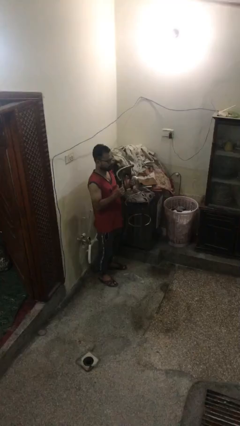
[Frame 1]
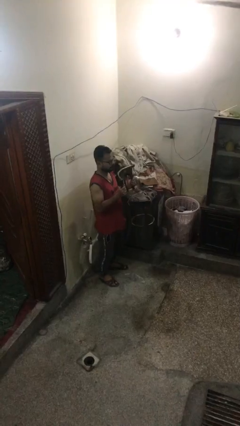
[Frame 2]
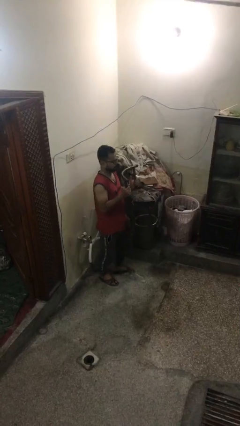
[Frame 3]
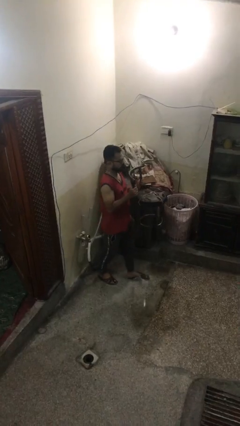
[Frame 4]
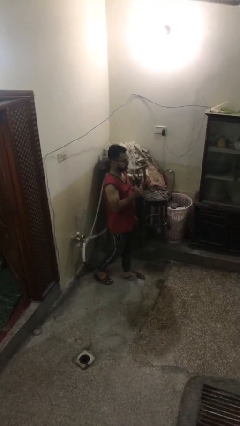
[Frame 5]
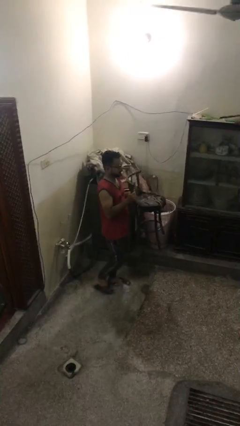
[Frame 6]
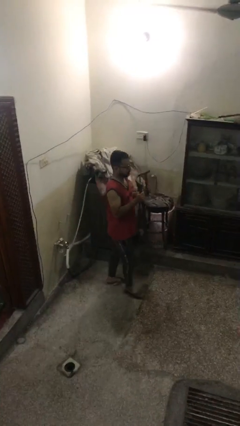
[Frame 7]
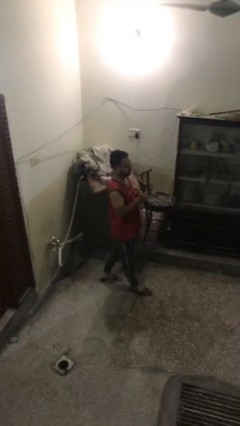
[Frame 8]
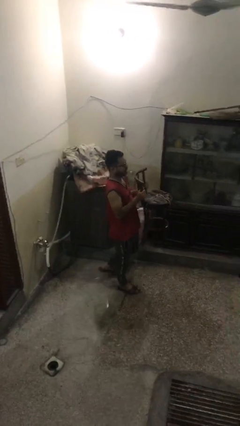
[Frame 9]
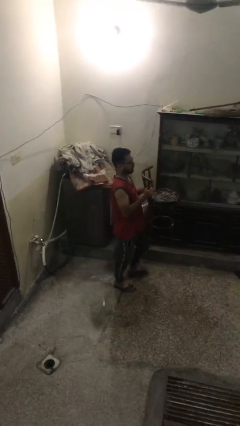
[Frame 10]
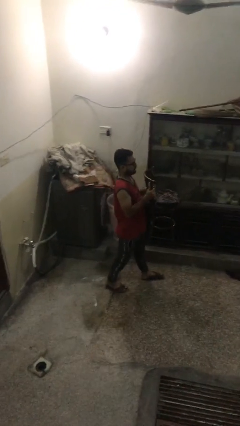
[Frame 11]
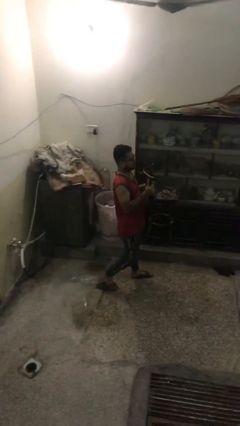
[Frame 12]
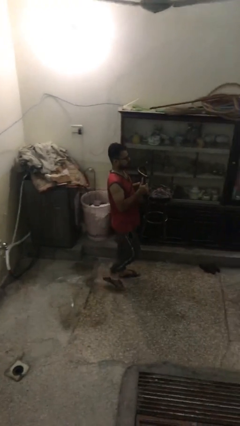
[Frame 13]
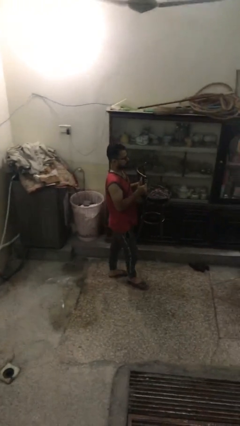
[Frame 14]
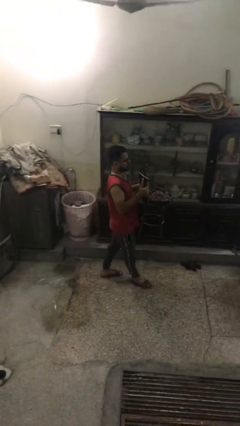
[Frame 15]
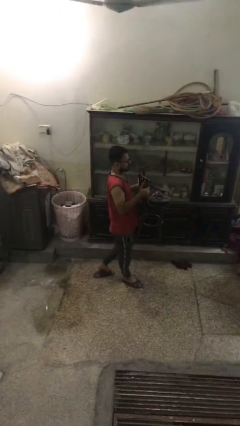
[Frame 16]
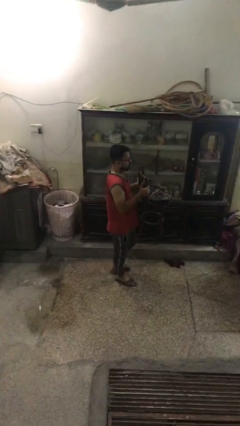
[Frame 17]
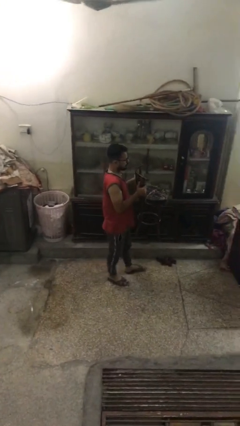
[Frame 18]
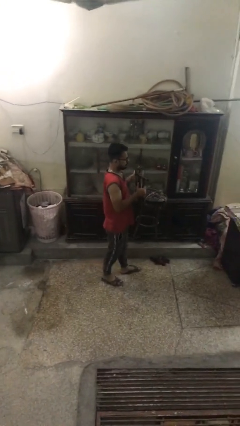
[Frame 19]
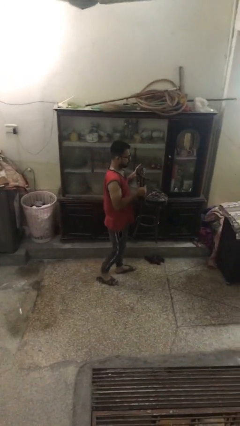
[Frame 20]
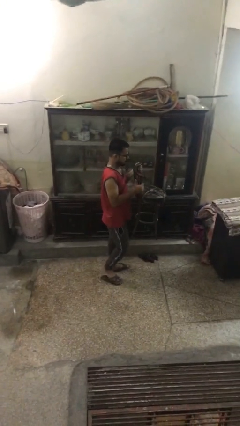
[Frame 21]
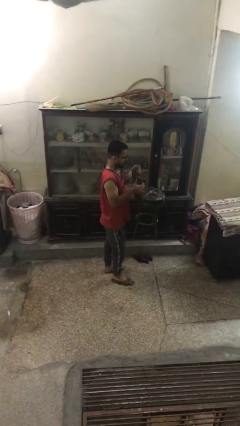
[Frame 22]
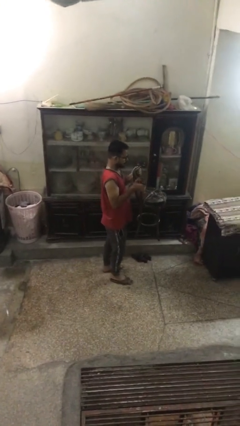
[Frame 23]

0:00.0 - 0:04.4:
person carries heavy object

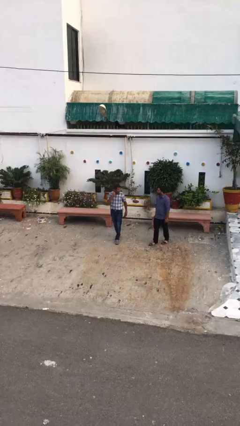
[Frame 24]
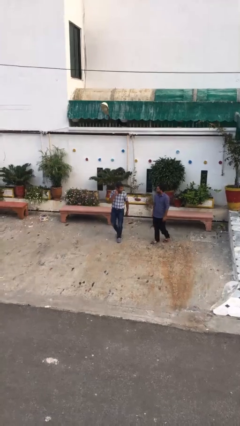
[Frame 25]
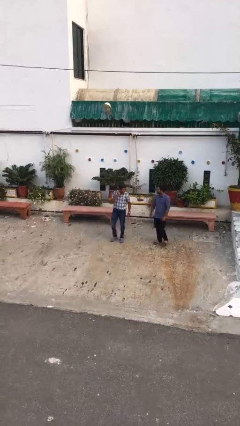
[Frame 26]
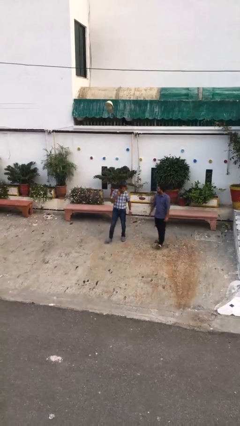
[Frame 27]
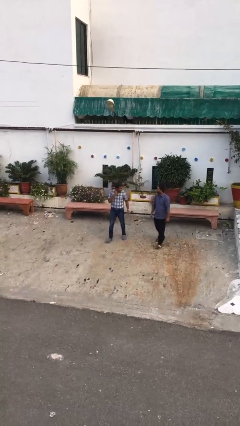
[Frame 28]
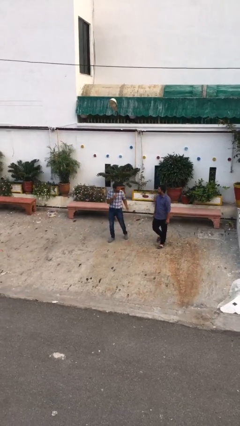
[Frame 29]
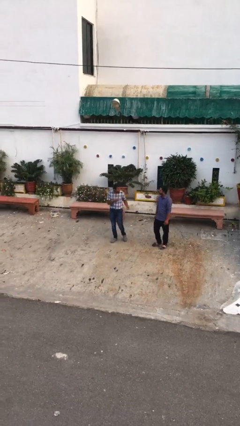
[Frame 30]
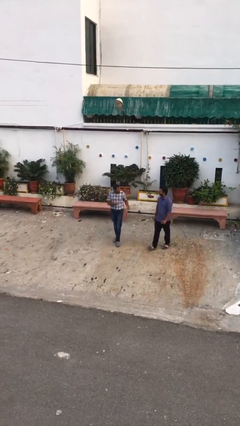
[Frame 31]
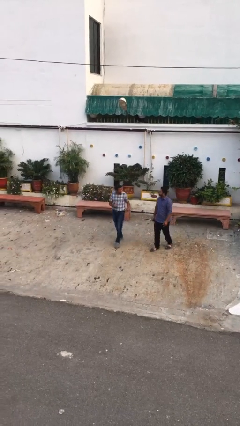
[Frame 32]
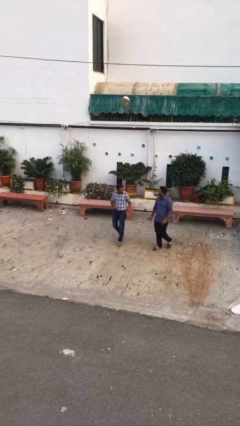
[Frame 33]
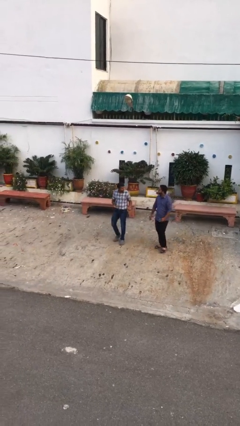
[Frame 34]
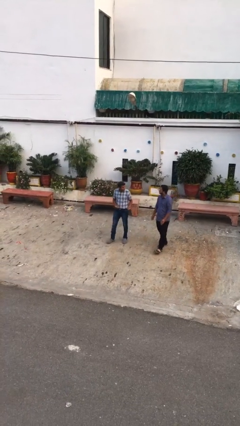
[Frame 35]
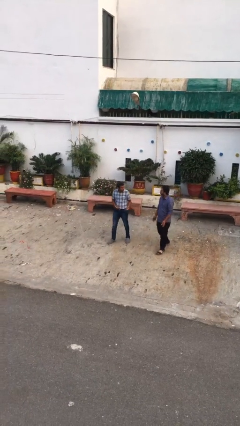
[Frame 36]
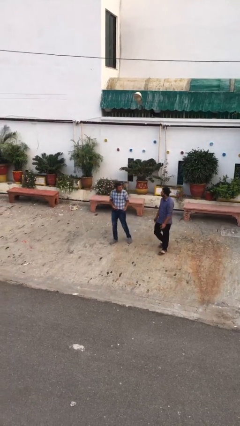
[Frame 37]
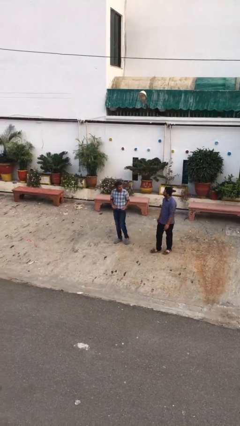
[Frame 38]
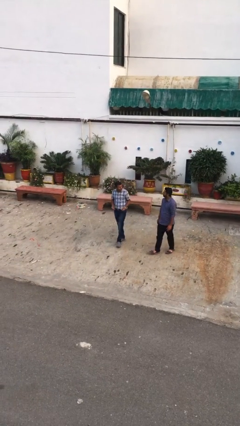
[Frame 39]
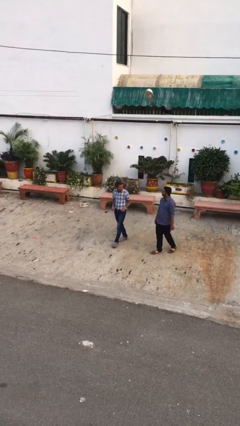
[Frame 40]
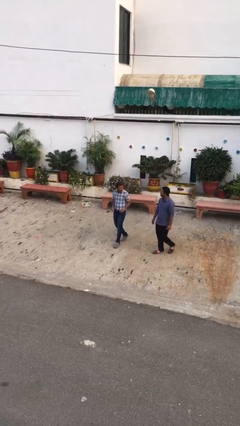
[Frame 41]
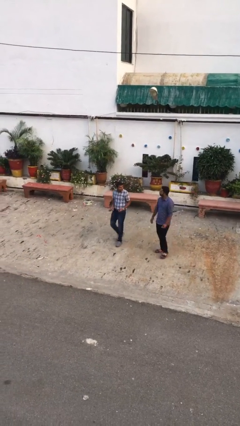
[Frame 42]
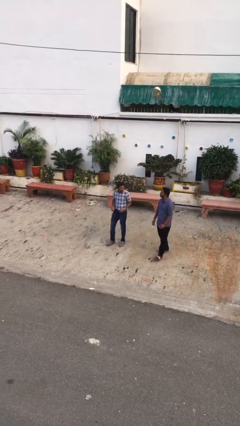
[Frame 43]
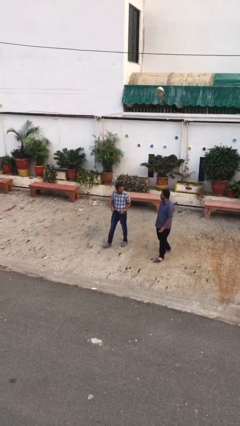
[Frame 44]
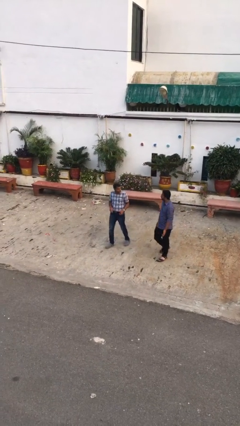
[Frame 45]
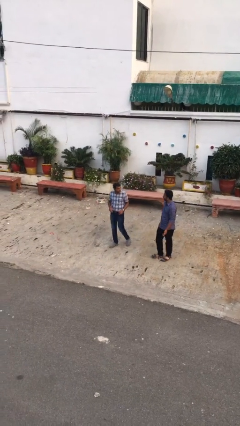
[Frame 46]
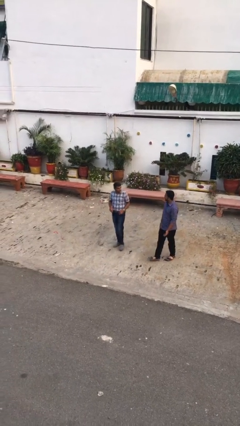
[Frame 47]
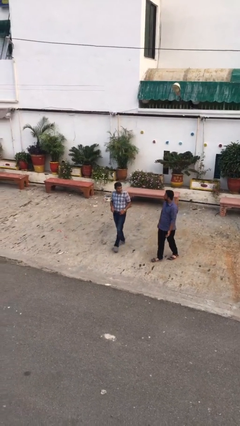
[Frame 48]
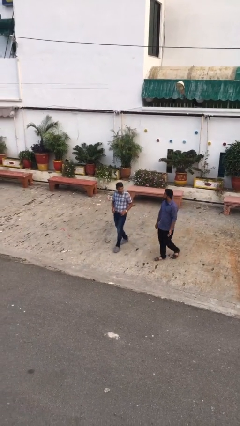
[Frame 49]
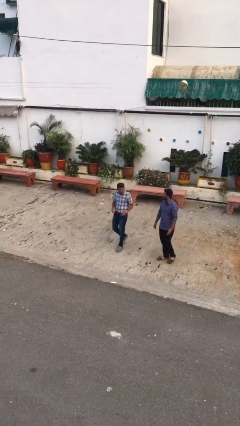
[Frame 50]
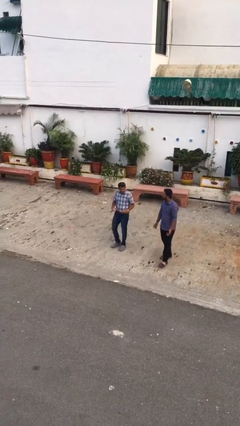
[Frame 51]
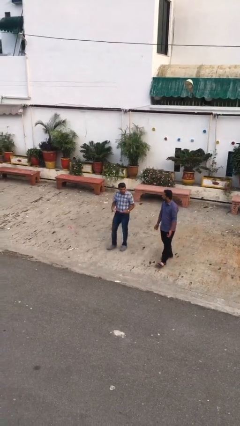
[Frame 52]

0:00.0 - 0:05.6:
person talks to person

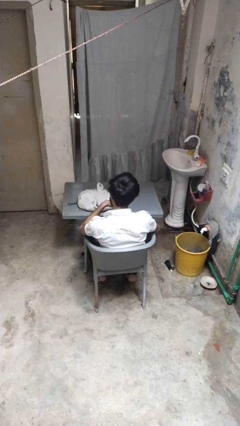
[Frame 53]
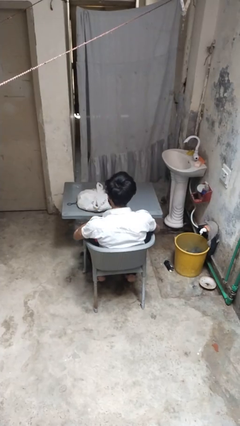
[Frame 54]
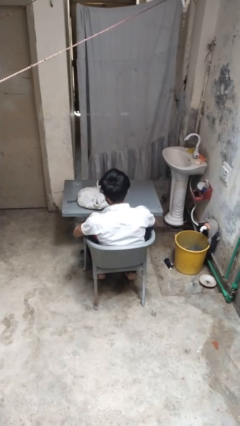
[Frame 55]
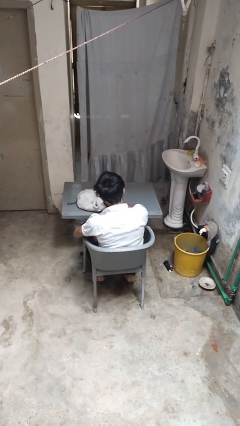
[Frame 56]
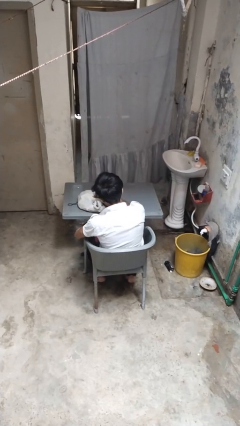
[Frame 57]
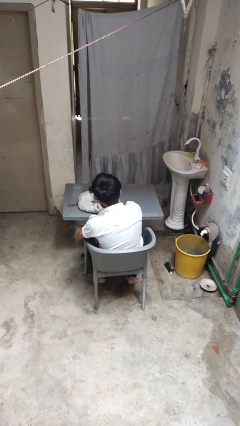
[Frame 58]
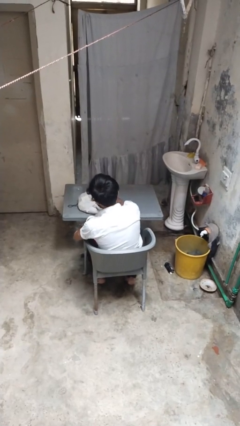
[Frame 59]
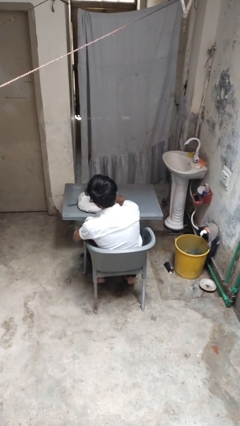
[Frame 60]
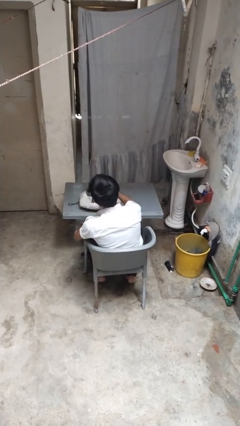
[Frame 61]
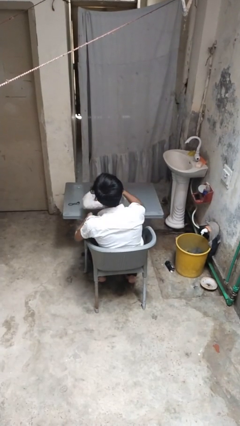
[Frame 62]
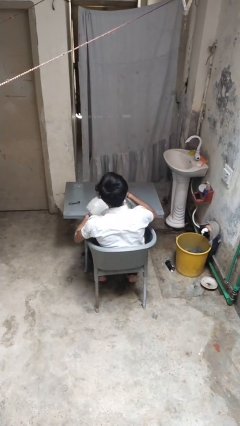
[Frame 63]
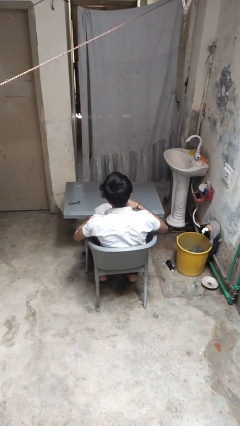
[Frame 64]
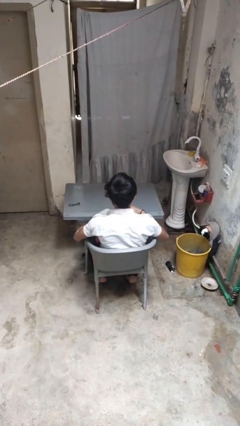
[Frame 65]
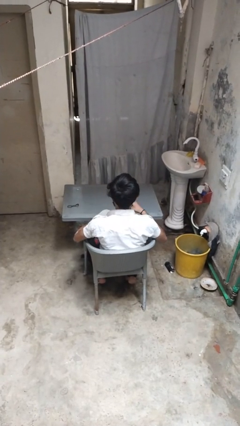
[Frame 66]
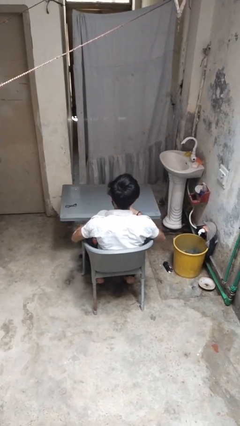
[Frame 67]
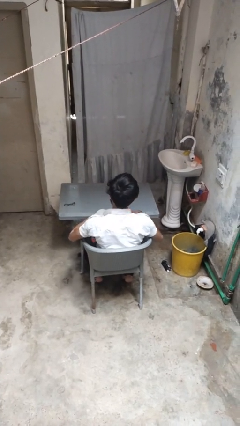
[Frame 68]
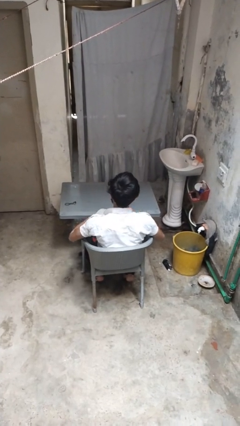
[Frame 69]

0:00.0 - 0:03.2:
person picks up object from table

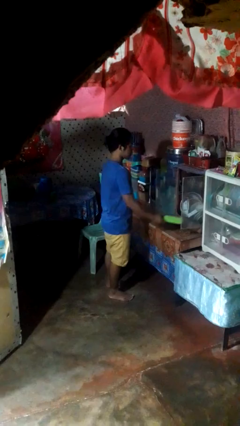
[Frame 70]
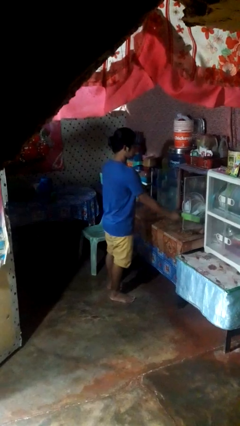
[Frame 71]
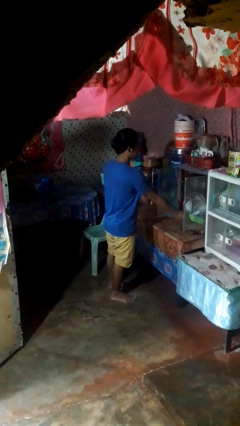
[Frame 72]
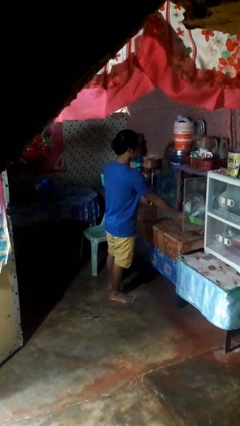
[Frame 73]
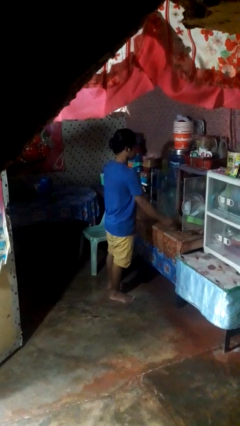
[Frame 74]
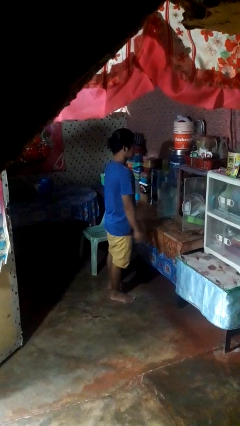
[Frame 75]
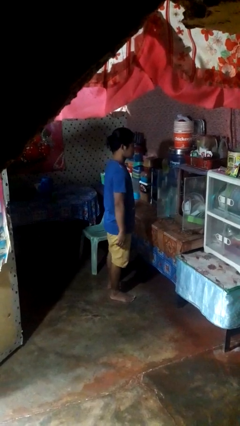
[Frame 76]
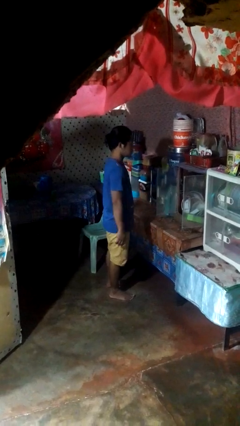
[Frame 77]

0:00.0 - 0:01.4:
person puts down object into cabinet

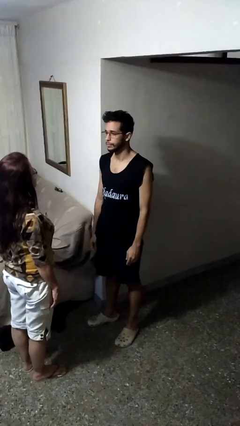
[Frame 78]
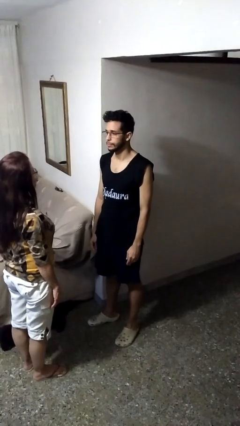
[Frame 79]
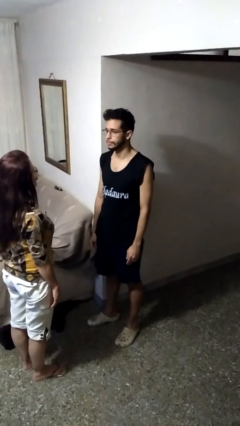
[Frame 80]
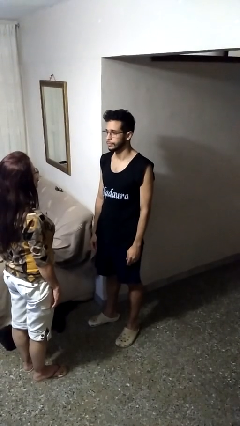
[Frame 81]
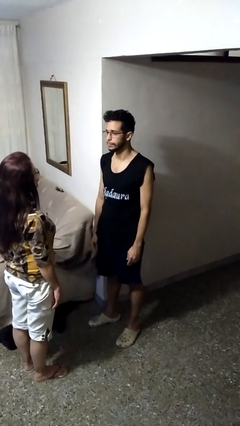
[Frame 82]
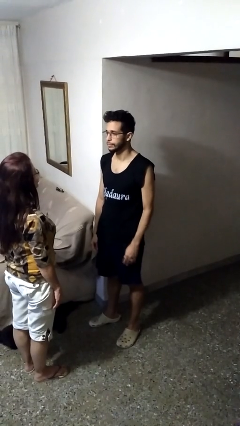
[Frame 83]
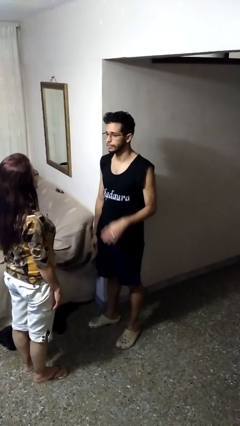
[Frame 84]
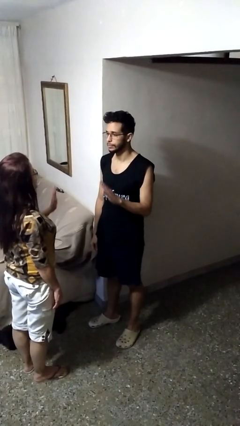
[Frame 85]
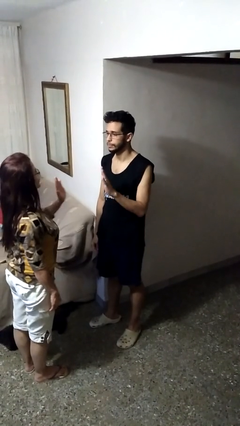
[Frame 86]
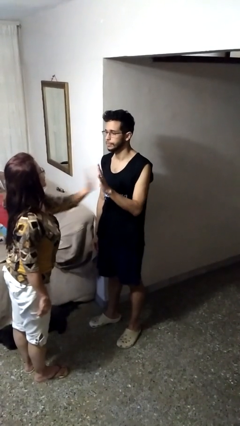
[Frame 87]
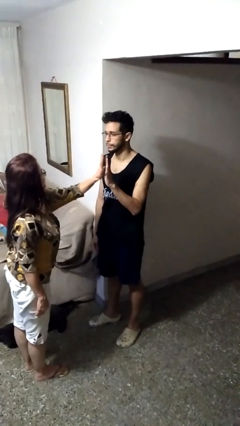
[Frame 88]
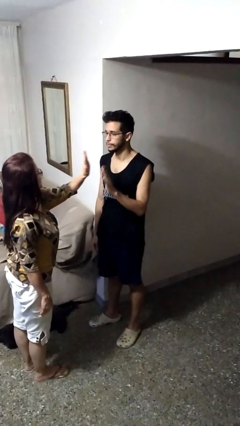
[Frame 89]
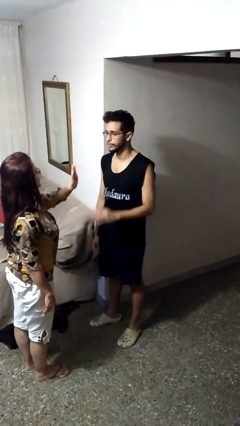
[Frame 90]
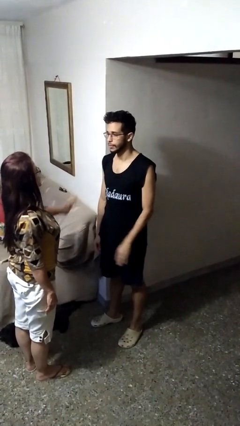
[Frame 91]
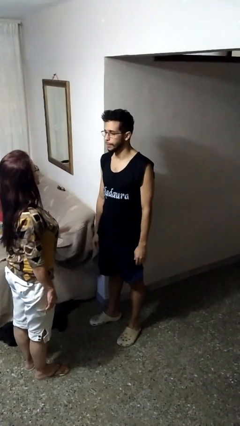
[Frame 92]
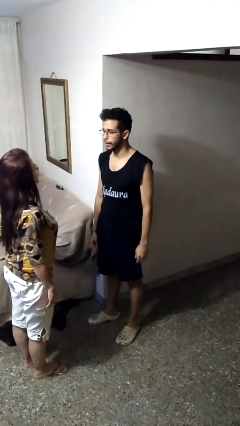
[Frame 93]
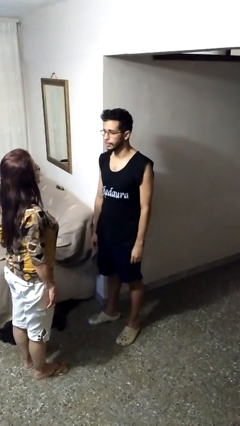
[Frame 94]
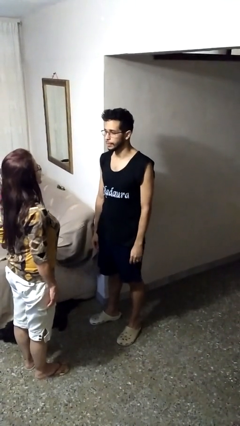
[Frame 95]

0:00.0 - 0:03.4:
person highfives hand
